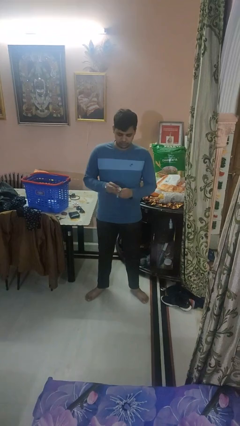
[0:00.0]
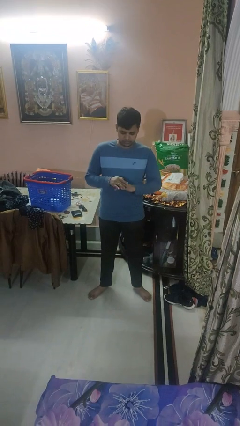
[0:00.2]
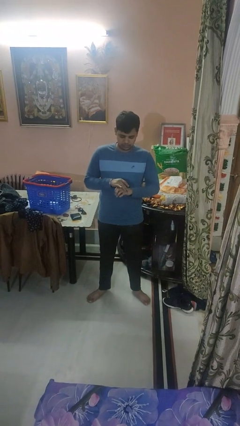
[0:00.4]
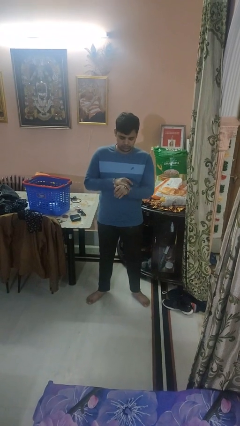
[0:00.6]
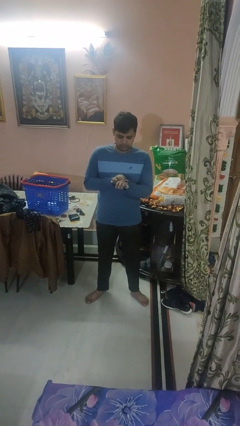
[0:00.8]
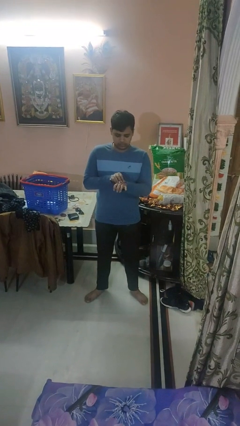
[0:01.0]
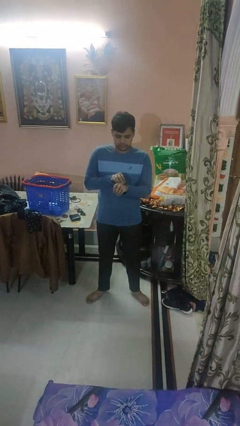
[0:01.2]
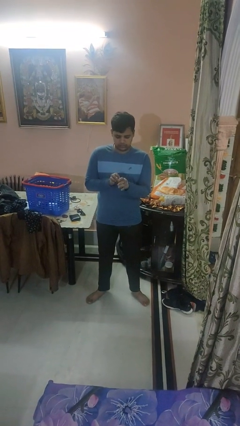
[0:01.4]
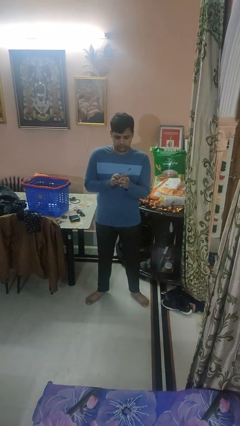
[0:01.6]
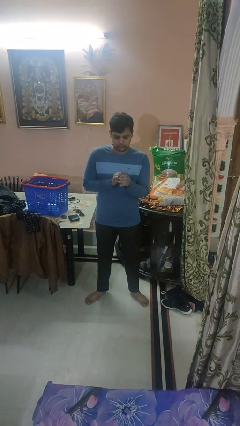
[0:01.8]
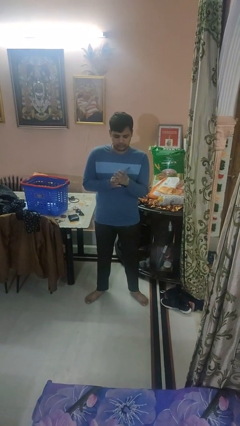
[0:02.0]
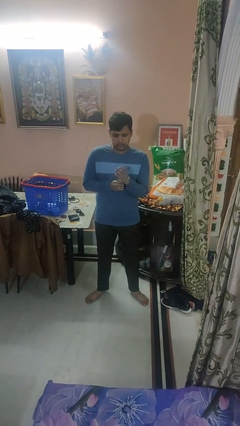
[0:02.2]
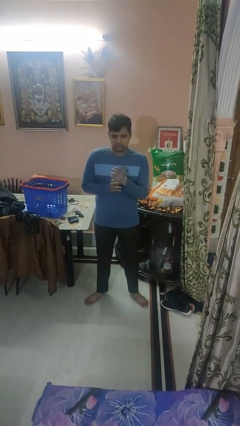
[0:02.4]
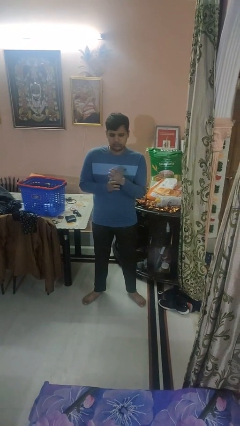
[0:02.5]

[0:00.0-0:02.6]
person puts on wristwatch

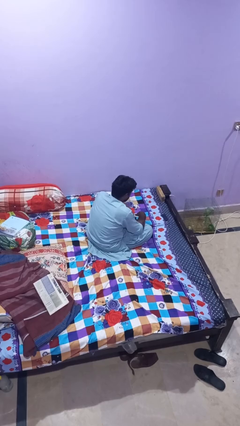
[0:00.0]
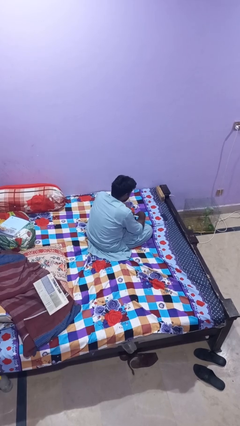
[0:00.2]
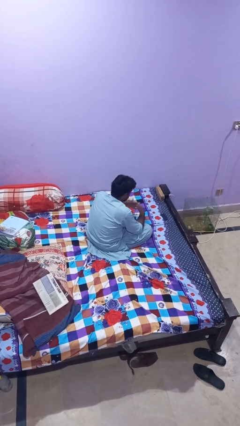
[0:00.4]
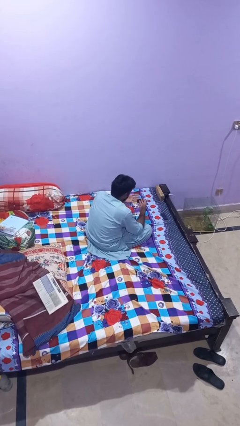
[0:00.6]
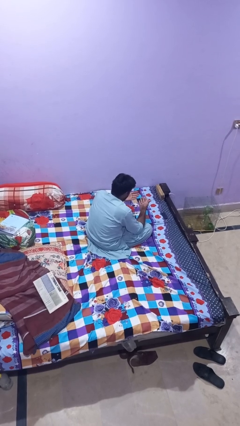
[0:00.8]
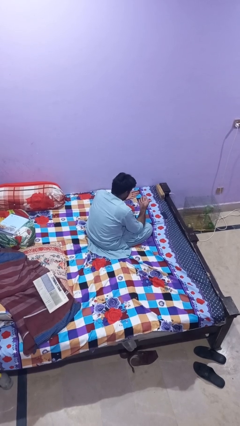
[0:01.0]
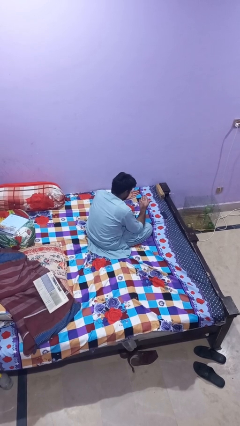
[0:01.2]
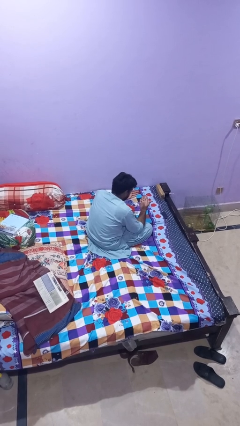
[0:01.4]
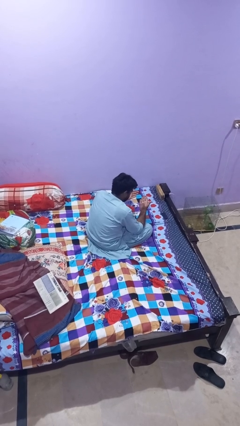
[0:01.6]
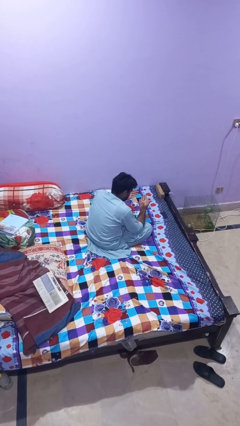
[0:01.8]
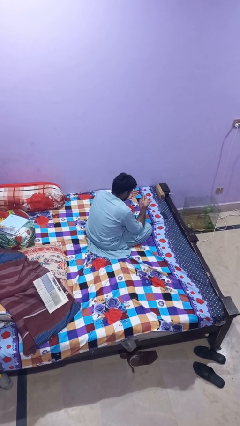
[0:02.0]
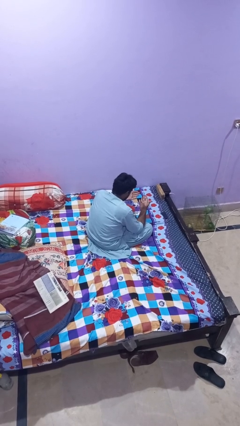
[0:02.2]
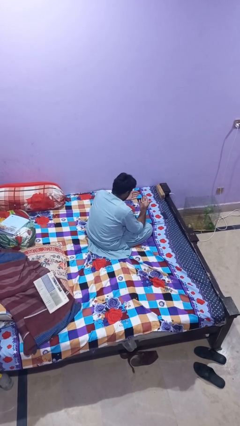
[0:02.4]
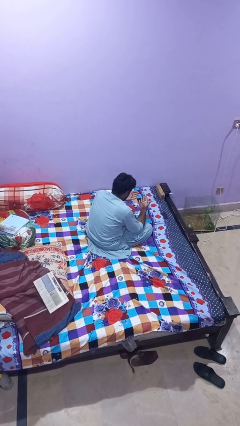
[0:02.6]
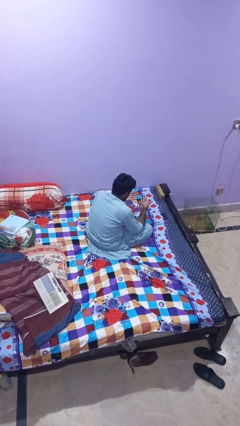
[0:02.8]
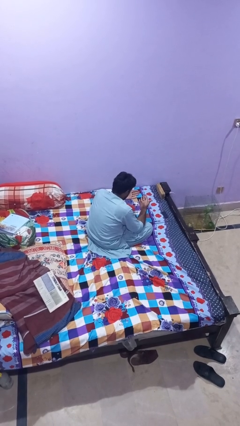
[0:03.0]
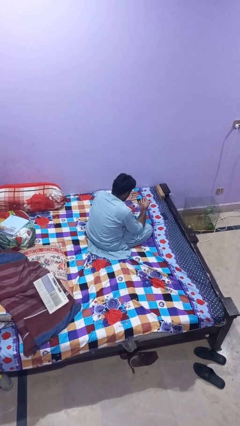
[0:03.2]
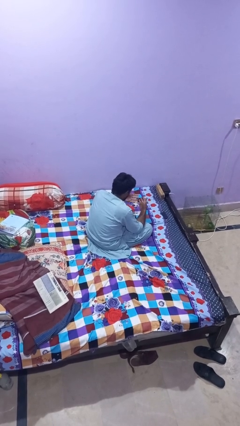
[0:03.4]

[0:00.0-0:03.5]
person looks at hands in lap

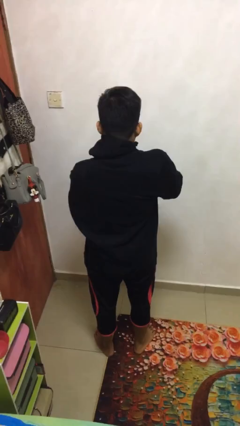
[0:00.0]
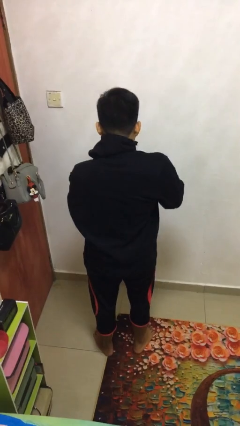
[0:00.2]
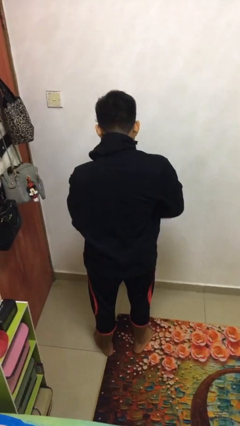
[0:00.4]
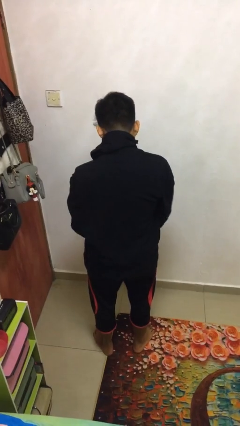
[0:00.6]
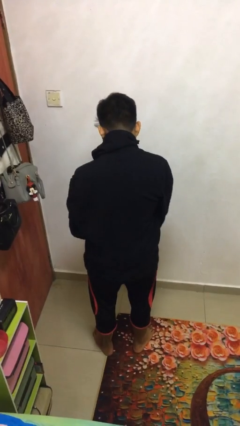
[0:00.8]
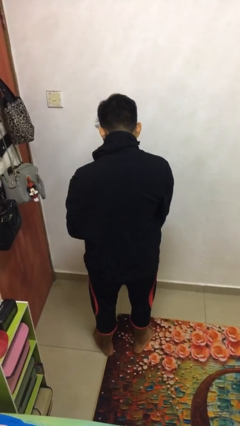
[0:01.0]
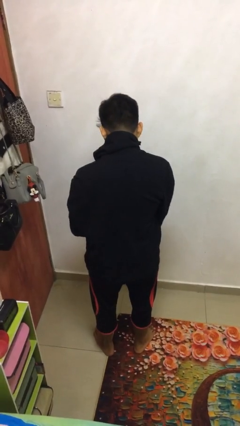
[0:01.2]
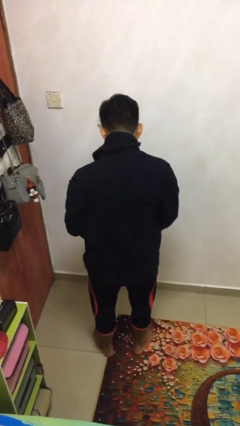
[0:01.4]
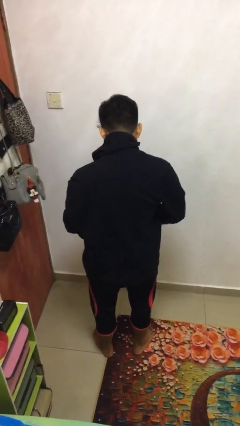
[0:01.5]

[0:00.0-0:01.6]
person unzips jacket

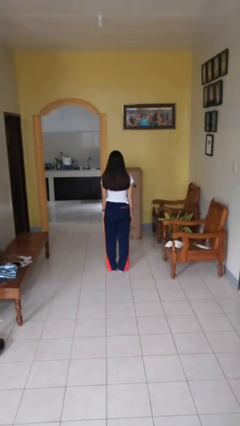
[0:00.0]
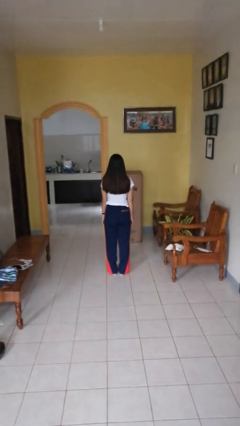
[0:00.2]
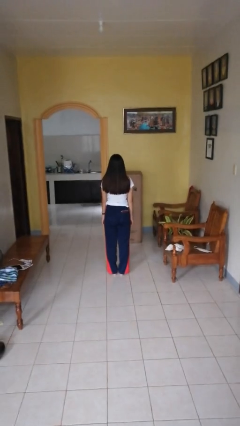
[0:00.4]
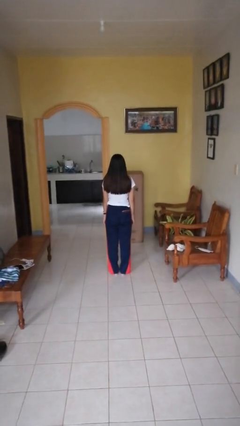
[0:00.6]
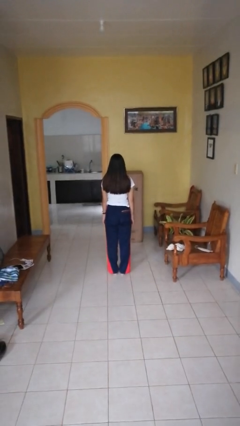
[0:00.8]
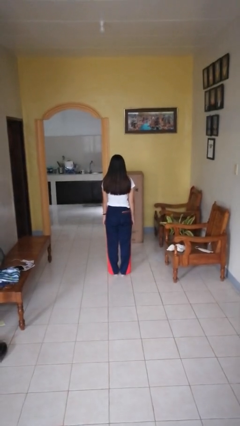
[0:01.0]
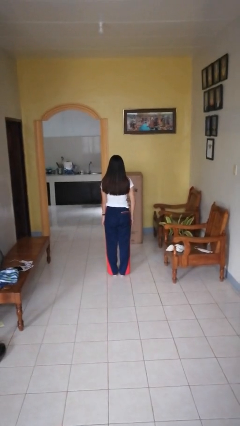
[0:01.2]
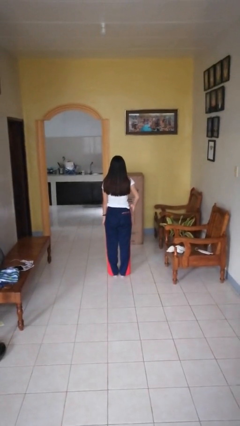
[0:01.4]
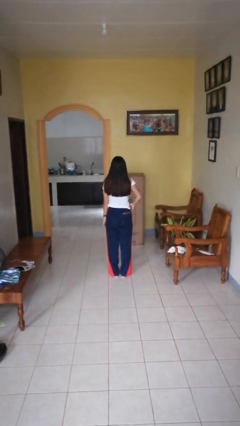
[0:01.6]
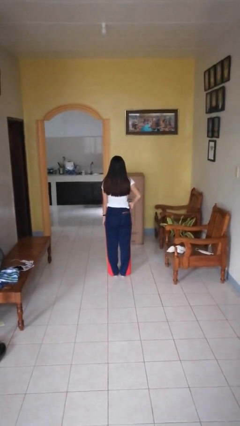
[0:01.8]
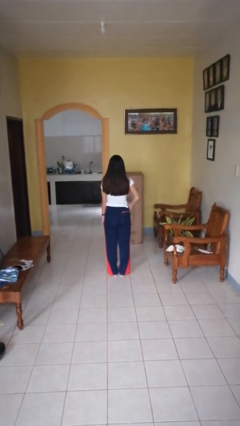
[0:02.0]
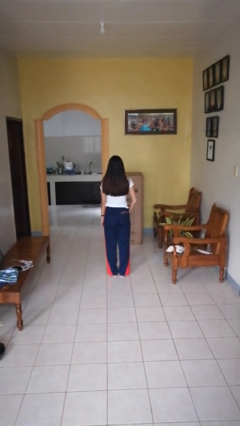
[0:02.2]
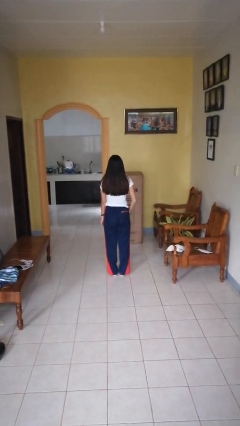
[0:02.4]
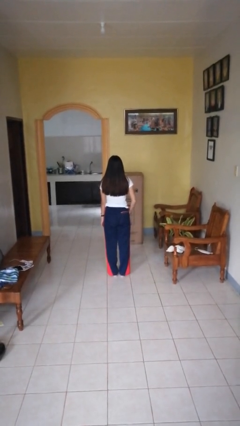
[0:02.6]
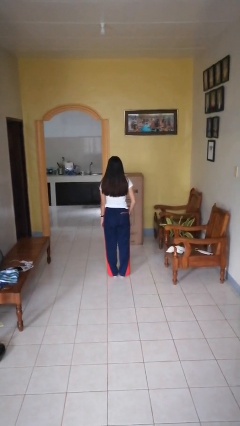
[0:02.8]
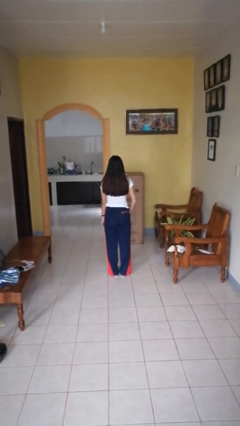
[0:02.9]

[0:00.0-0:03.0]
person puts hands in back pockets

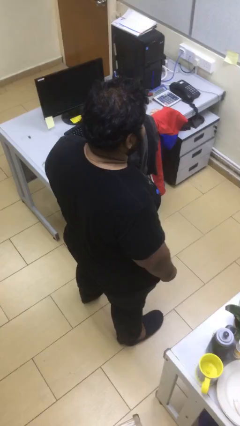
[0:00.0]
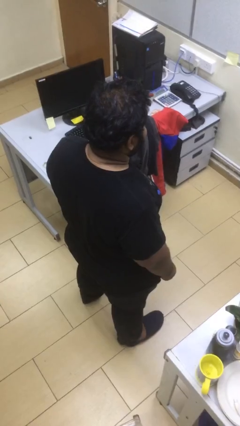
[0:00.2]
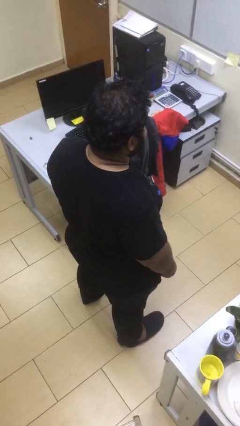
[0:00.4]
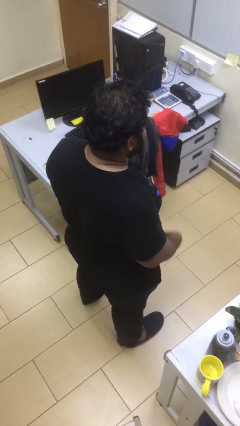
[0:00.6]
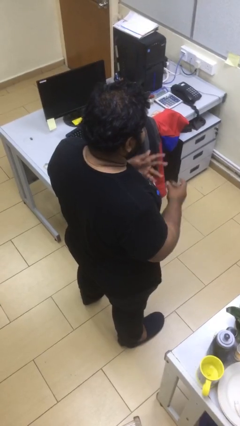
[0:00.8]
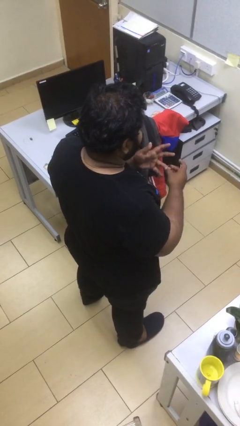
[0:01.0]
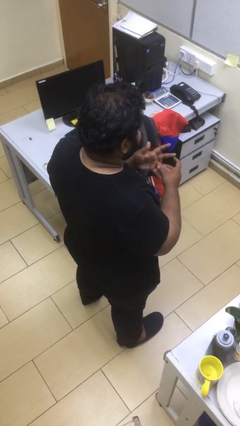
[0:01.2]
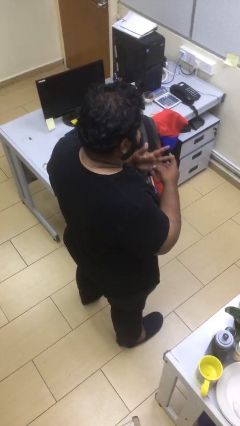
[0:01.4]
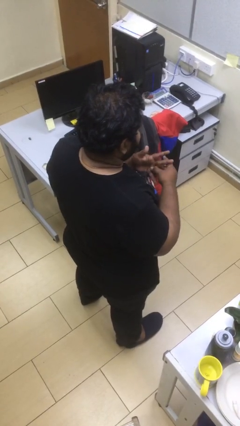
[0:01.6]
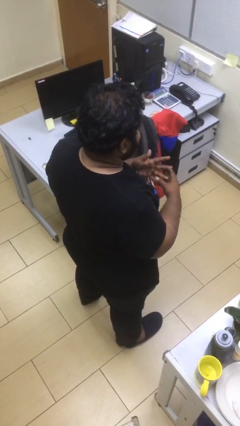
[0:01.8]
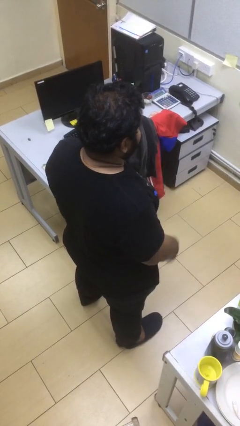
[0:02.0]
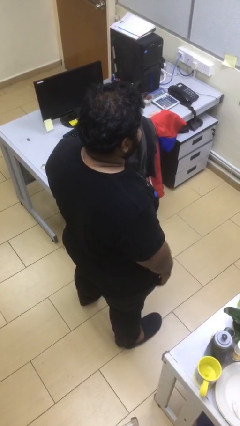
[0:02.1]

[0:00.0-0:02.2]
person puts on ring

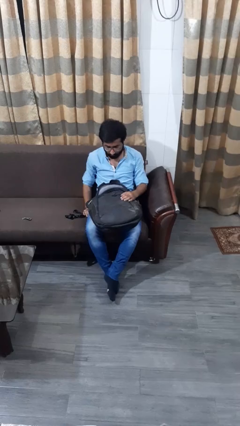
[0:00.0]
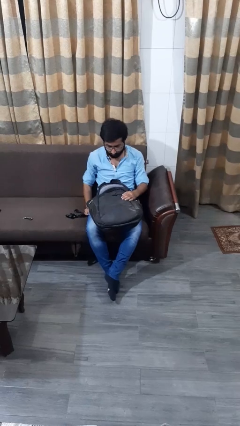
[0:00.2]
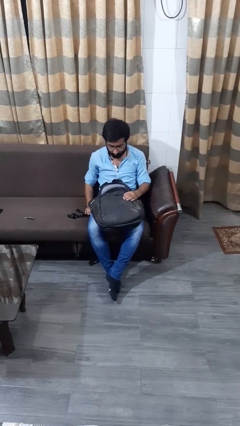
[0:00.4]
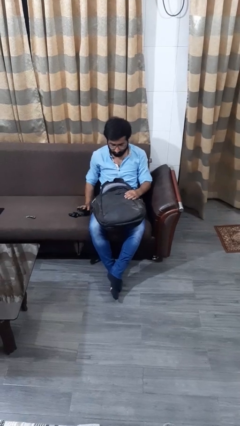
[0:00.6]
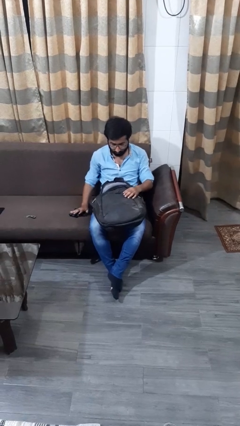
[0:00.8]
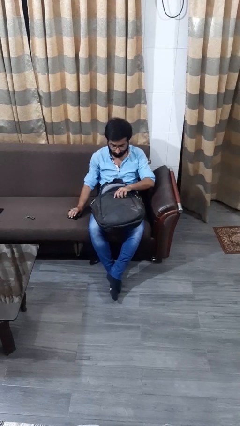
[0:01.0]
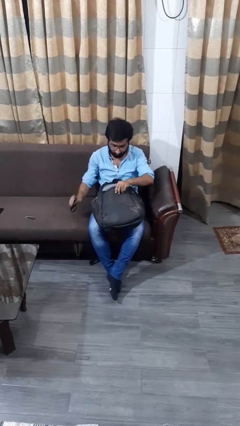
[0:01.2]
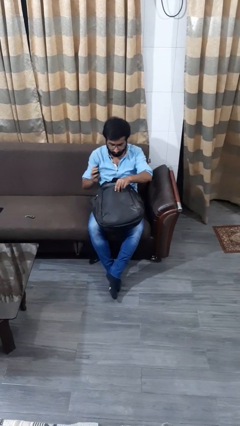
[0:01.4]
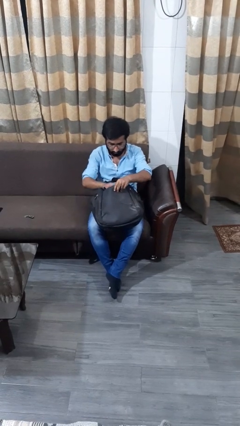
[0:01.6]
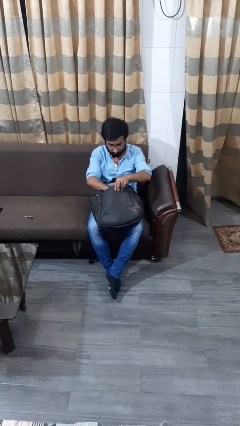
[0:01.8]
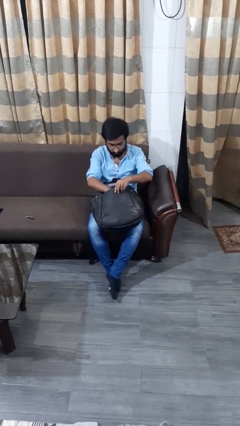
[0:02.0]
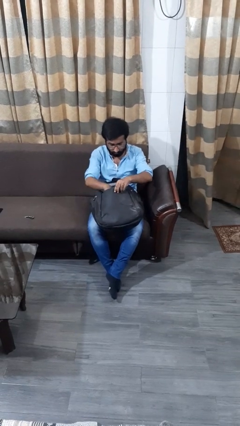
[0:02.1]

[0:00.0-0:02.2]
person puts object into backpack

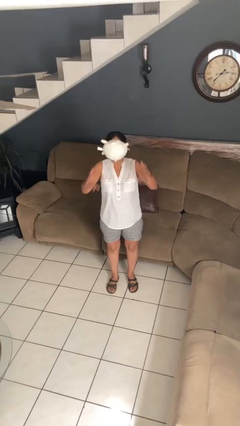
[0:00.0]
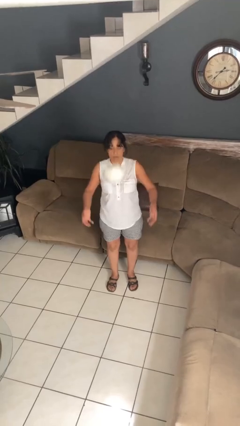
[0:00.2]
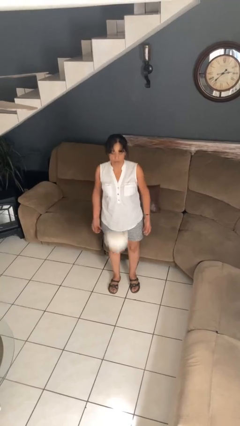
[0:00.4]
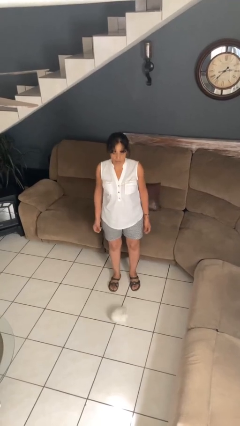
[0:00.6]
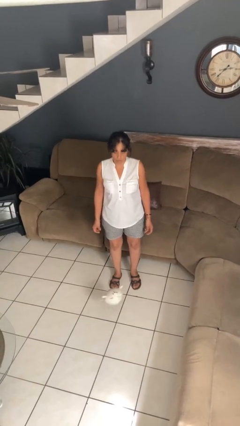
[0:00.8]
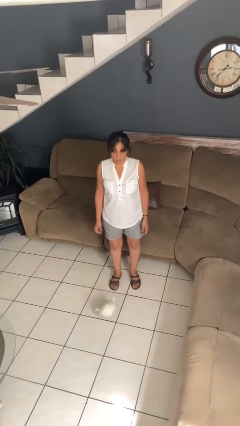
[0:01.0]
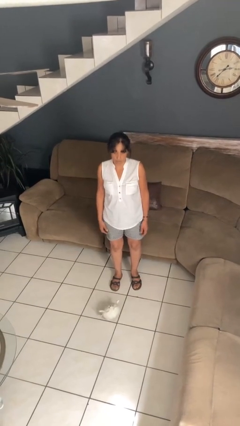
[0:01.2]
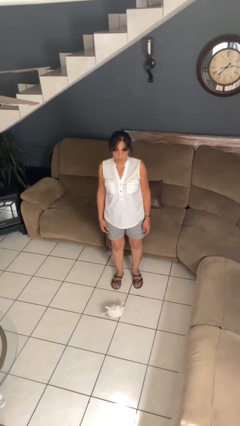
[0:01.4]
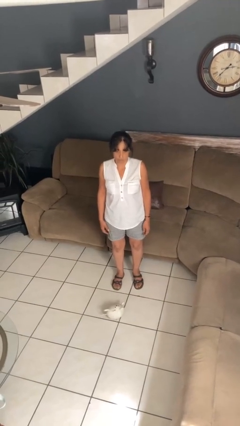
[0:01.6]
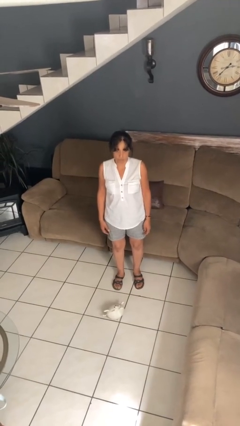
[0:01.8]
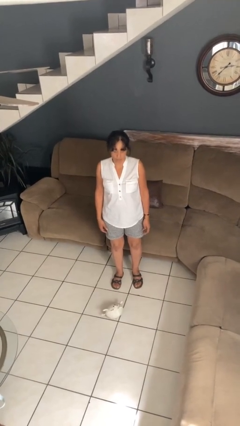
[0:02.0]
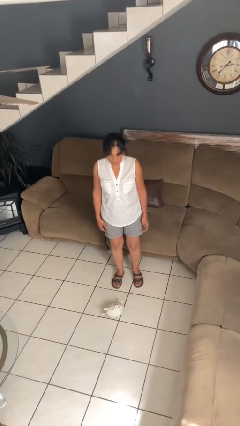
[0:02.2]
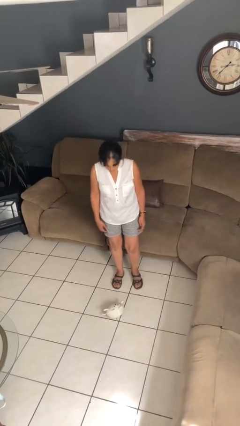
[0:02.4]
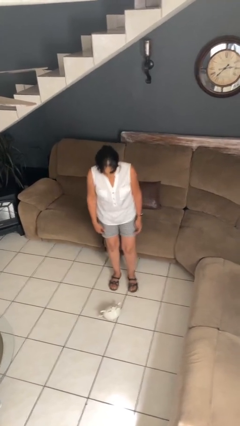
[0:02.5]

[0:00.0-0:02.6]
person throws object into air
